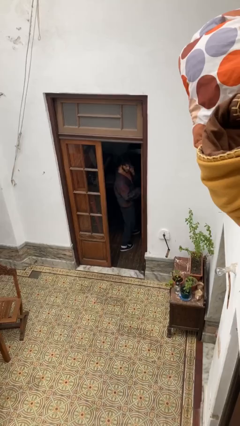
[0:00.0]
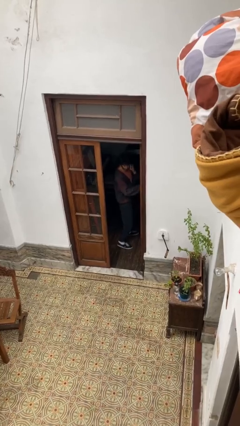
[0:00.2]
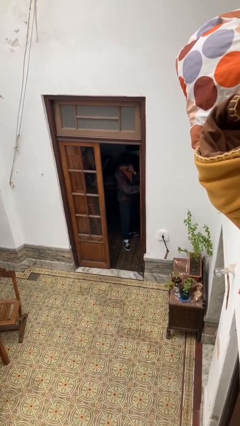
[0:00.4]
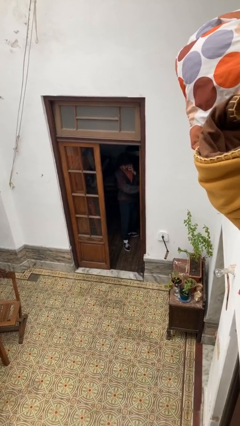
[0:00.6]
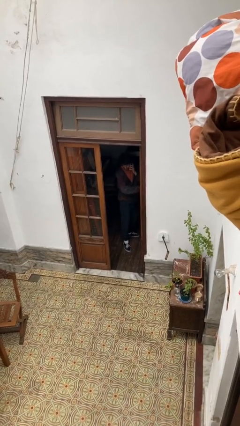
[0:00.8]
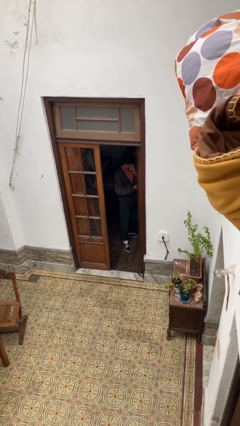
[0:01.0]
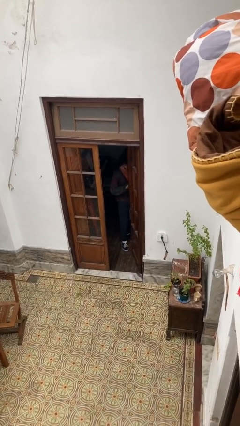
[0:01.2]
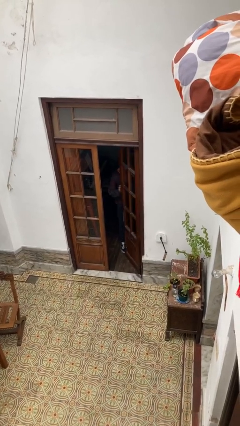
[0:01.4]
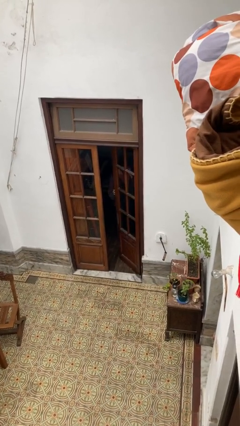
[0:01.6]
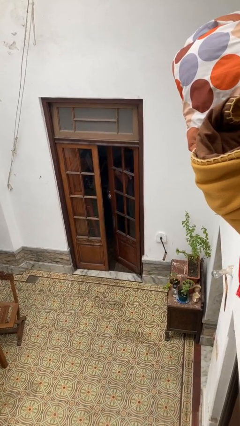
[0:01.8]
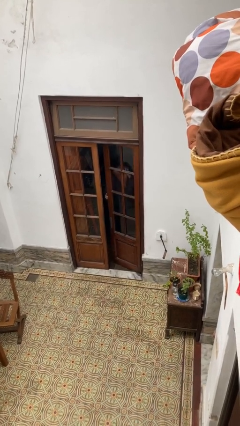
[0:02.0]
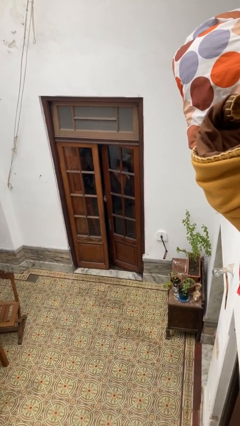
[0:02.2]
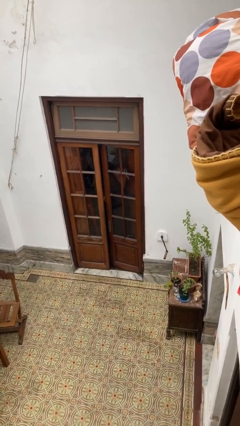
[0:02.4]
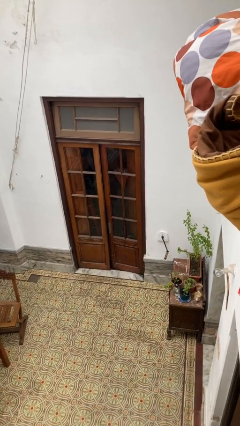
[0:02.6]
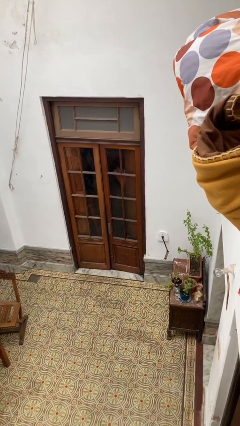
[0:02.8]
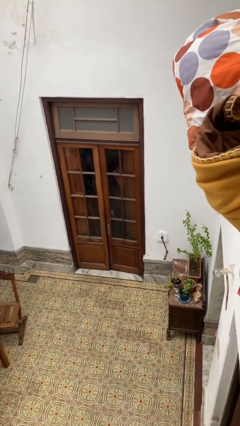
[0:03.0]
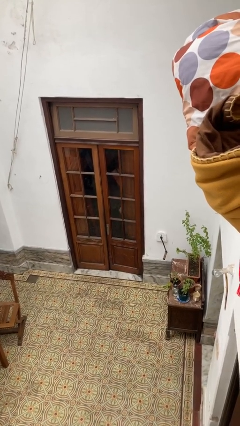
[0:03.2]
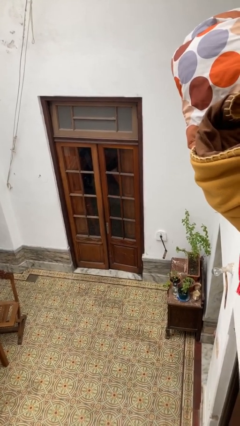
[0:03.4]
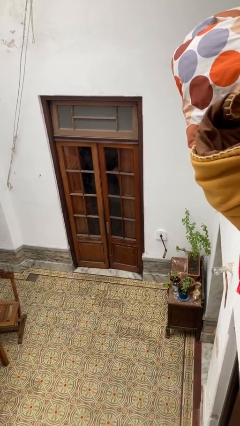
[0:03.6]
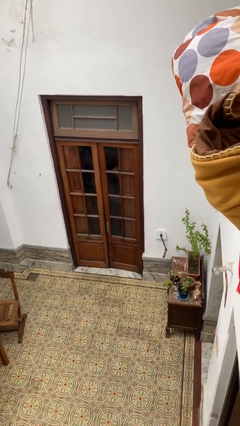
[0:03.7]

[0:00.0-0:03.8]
person closes facility door

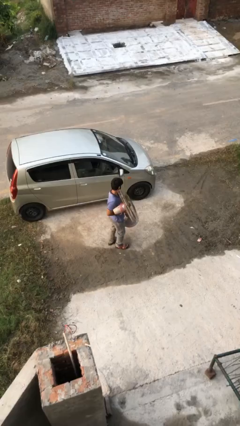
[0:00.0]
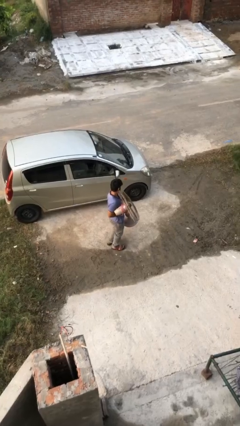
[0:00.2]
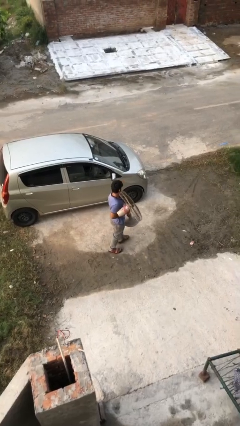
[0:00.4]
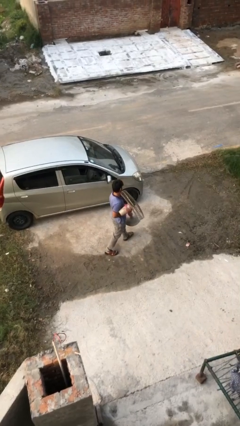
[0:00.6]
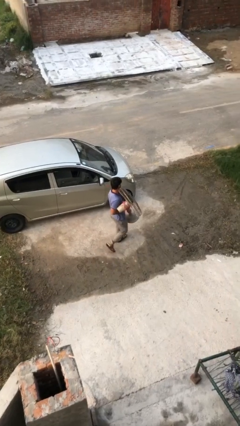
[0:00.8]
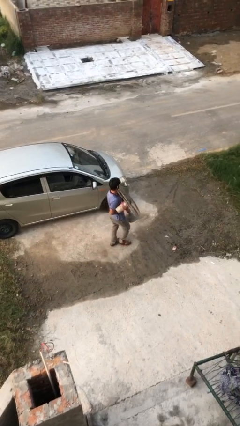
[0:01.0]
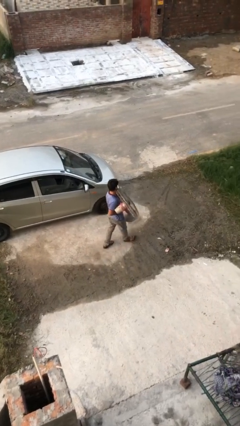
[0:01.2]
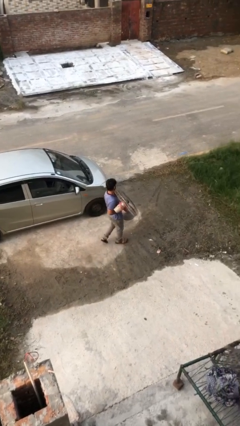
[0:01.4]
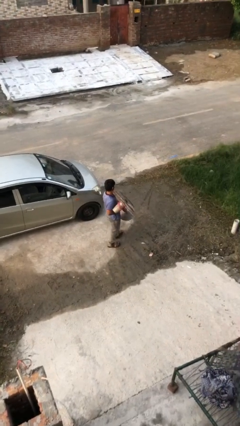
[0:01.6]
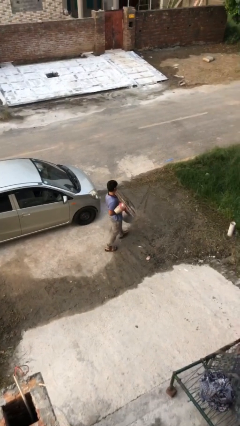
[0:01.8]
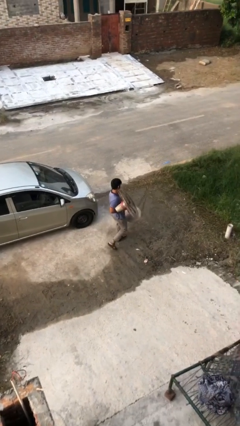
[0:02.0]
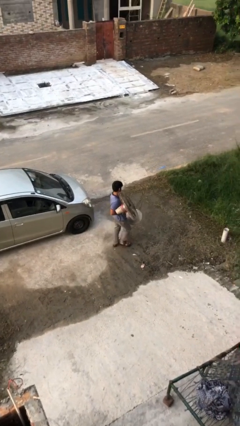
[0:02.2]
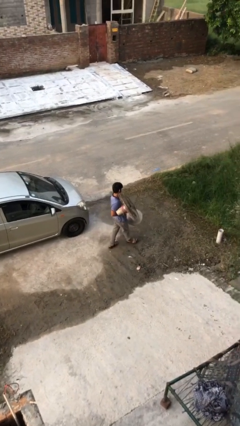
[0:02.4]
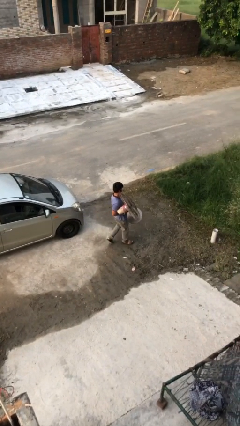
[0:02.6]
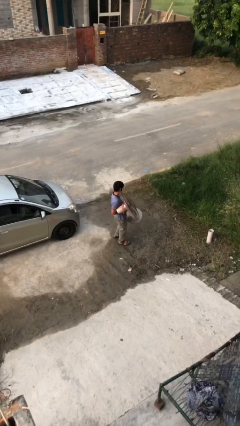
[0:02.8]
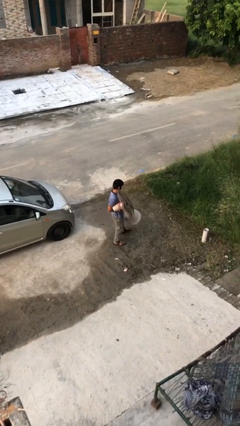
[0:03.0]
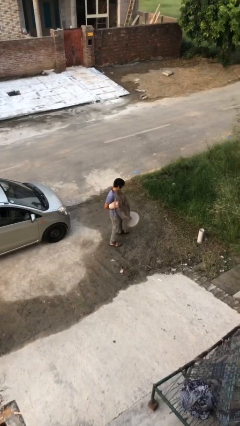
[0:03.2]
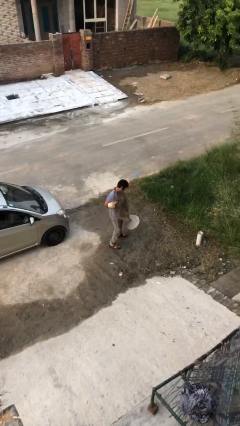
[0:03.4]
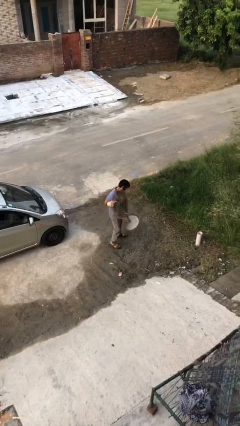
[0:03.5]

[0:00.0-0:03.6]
person carries heavy object

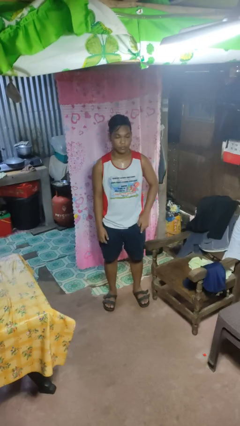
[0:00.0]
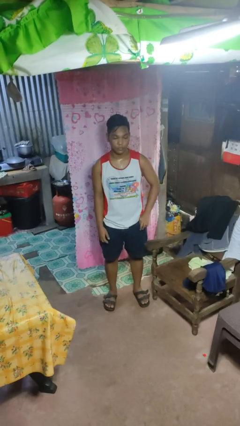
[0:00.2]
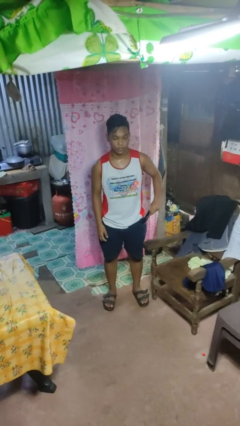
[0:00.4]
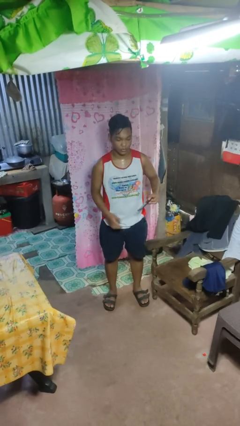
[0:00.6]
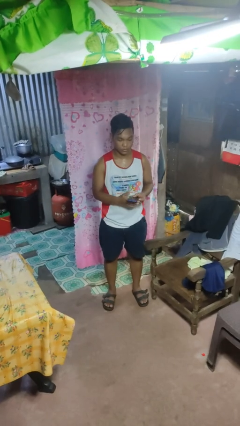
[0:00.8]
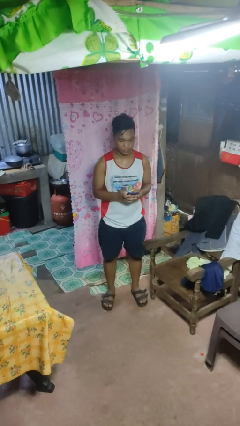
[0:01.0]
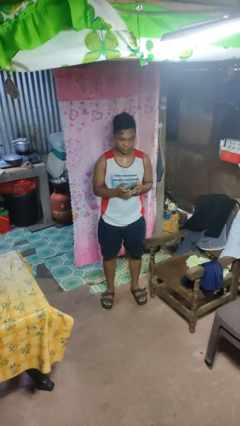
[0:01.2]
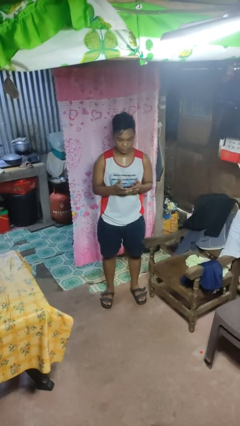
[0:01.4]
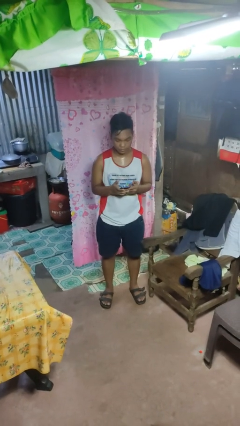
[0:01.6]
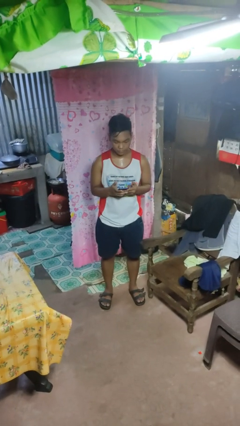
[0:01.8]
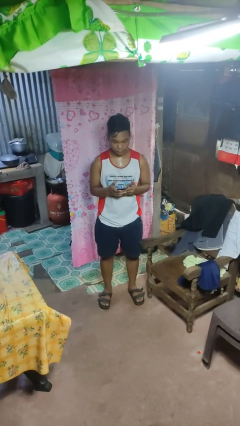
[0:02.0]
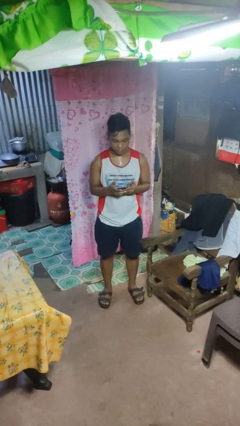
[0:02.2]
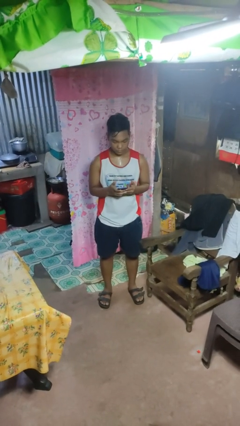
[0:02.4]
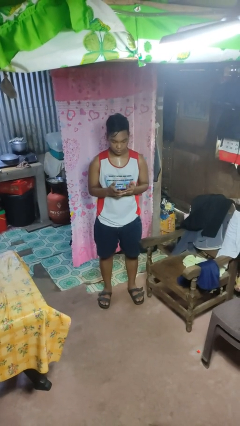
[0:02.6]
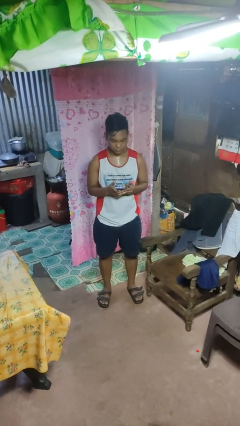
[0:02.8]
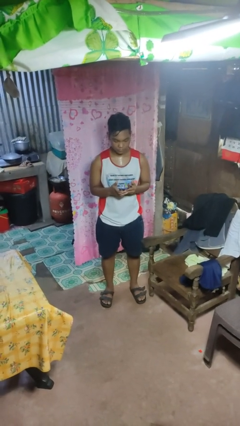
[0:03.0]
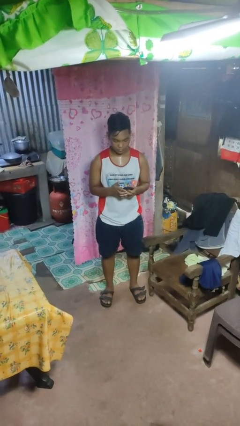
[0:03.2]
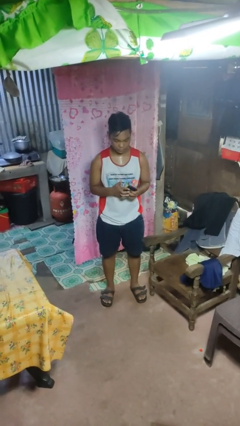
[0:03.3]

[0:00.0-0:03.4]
person takes phone from pocket

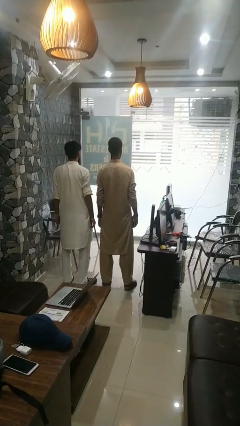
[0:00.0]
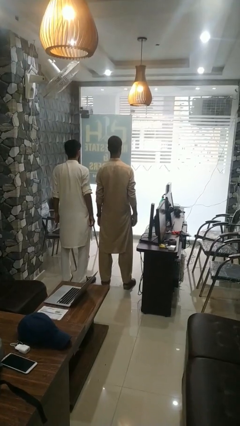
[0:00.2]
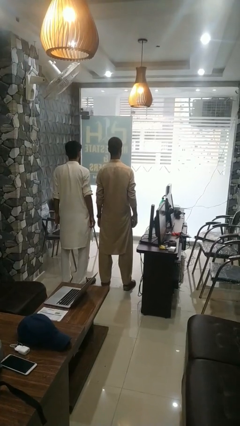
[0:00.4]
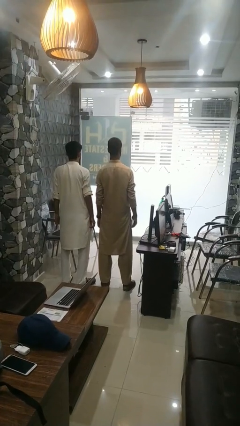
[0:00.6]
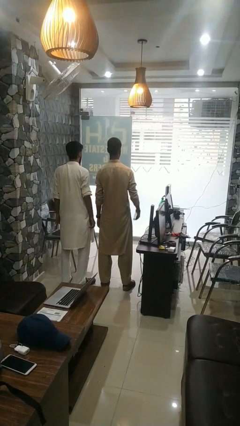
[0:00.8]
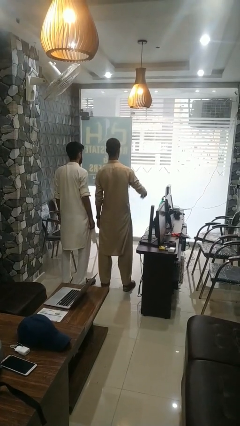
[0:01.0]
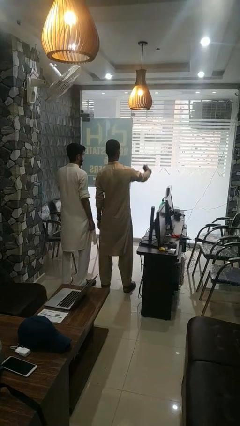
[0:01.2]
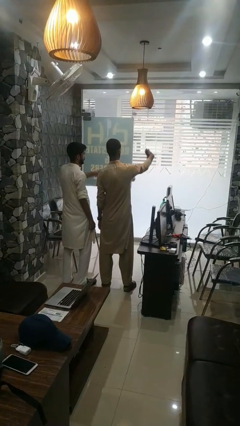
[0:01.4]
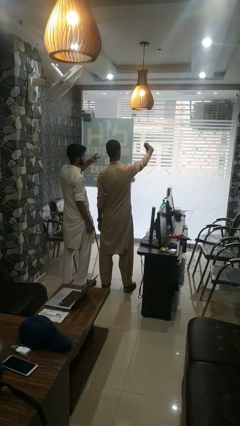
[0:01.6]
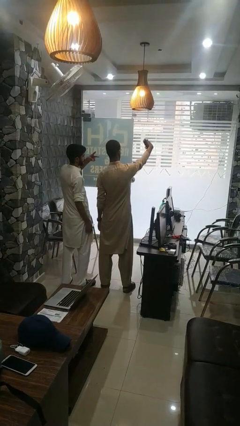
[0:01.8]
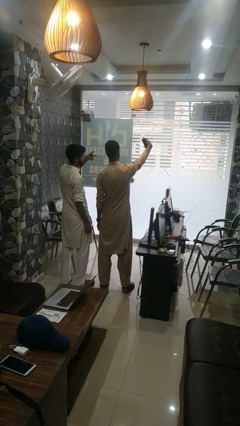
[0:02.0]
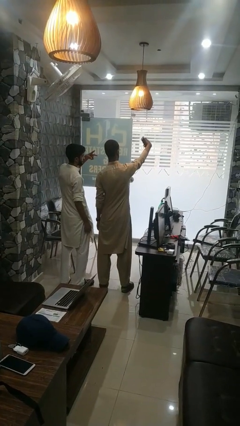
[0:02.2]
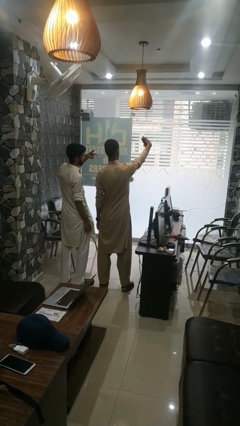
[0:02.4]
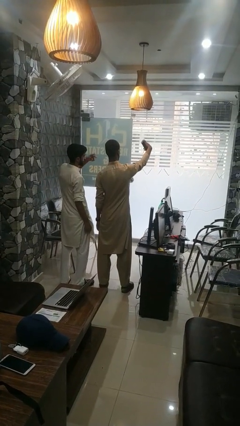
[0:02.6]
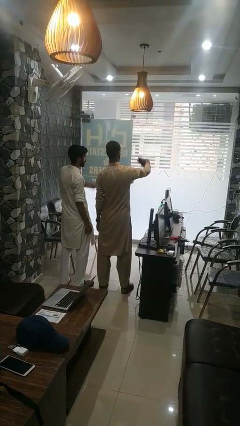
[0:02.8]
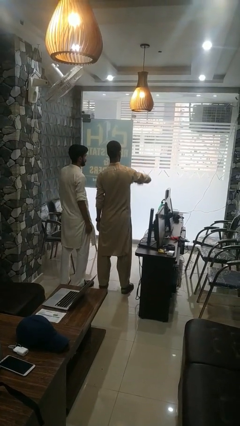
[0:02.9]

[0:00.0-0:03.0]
person takes selfie with person

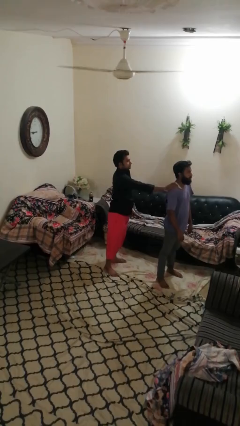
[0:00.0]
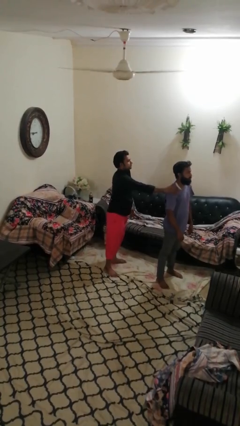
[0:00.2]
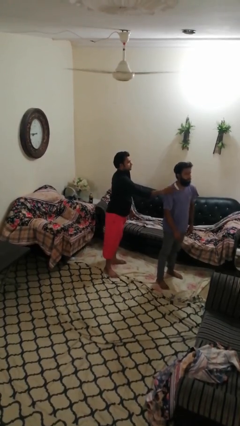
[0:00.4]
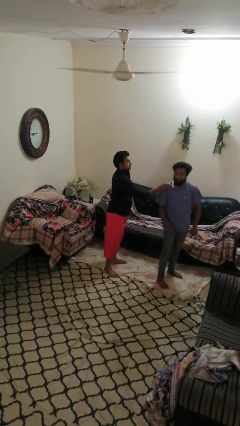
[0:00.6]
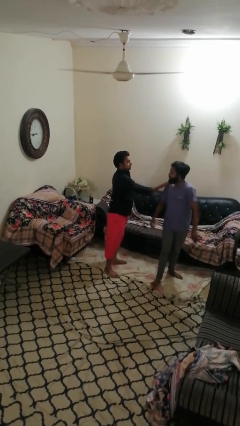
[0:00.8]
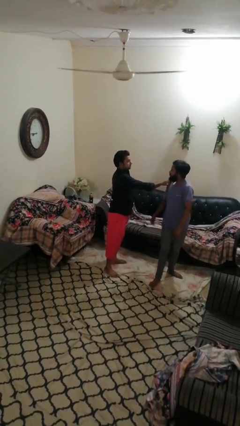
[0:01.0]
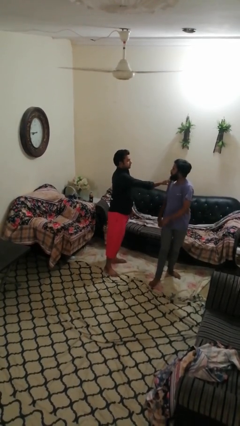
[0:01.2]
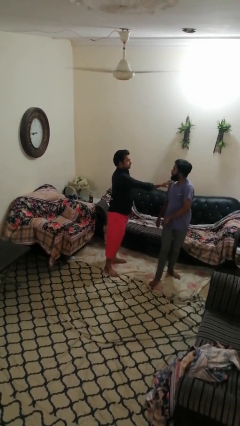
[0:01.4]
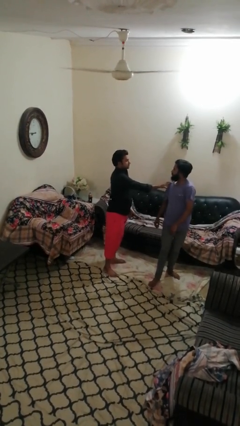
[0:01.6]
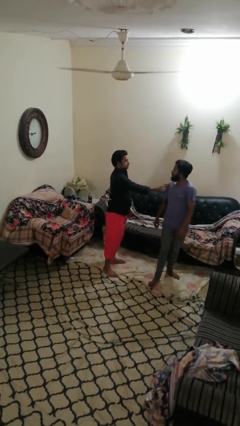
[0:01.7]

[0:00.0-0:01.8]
person spins person around

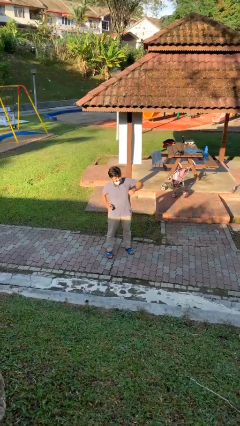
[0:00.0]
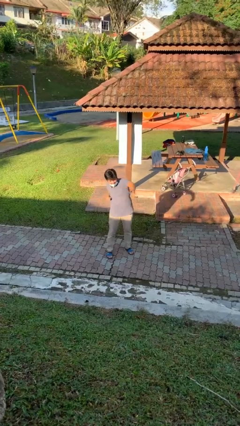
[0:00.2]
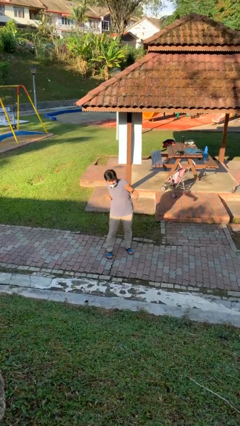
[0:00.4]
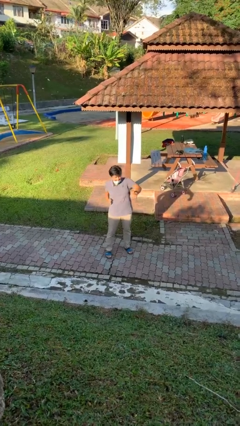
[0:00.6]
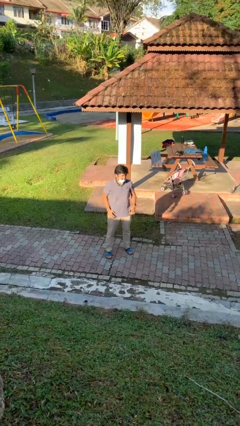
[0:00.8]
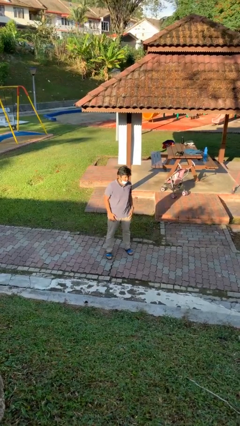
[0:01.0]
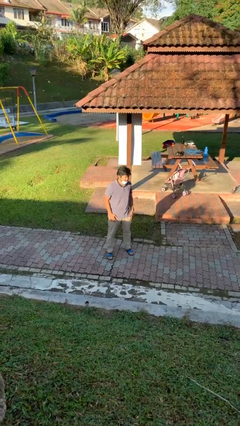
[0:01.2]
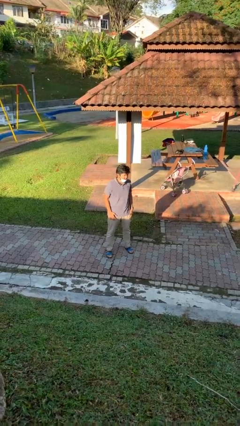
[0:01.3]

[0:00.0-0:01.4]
person punches

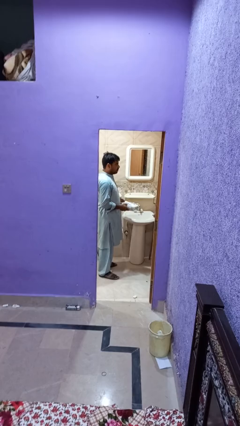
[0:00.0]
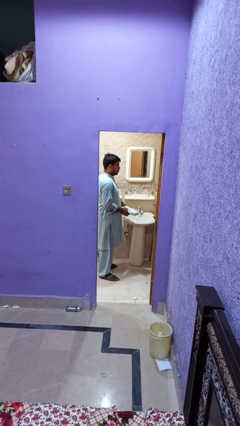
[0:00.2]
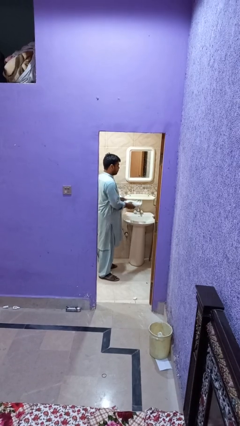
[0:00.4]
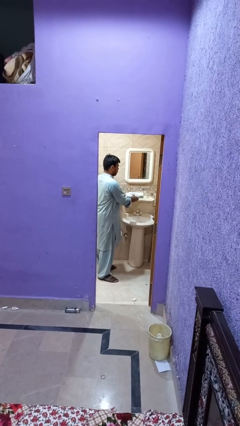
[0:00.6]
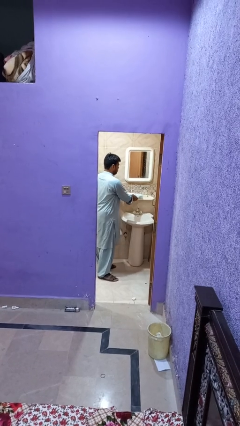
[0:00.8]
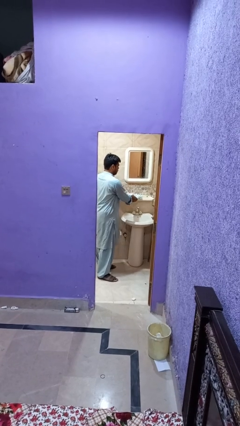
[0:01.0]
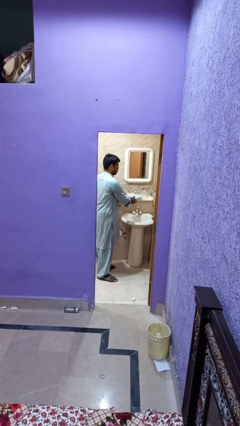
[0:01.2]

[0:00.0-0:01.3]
person puts down object on countertop
